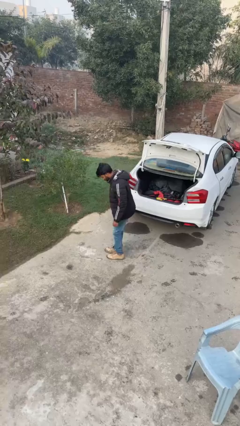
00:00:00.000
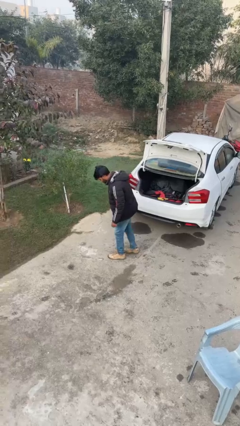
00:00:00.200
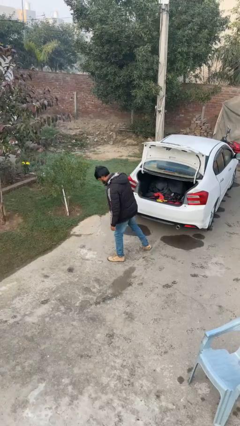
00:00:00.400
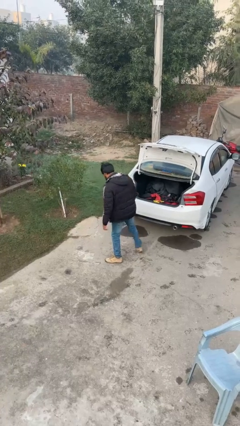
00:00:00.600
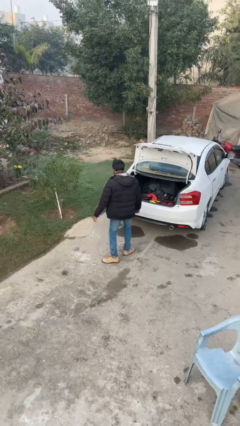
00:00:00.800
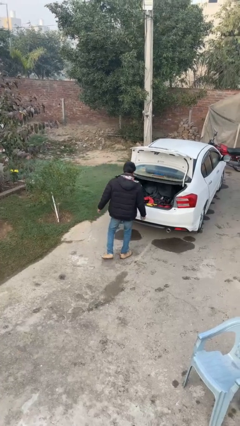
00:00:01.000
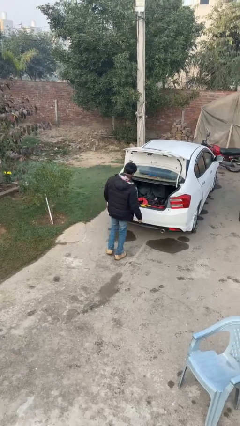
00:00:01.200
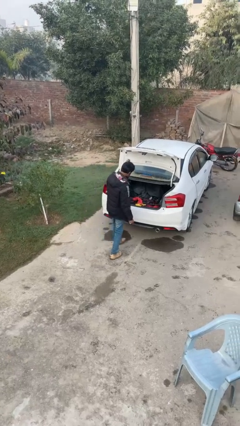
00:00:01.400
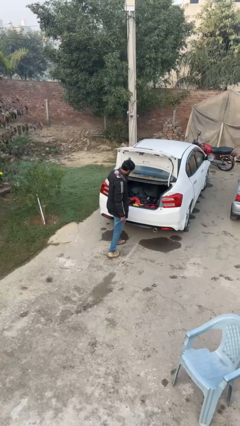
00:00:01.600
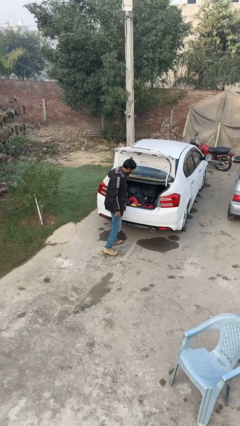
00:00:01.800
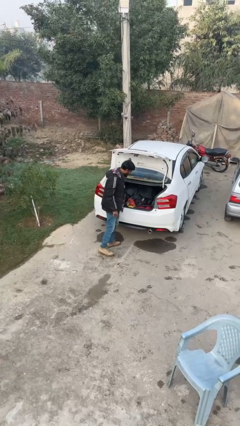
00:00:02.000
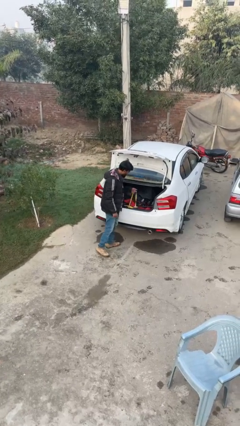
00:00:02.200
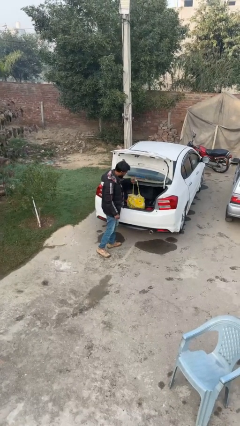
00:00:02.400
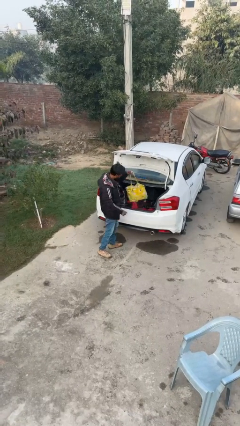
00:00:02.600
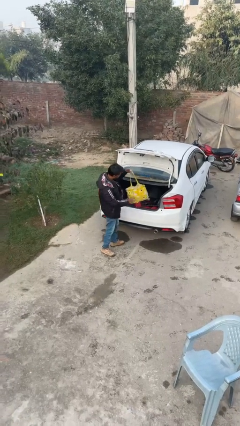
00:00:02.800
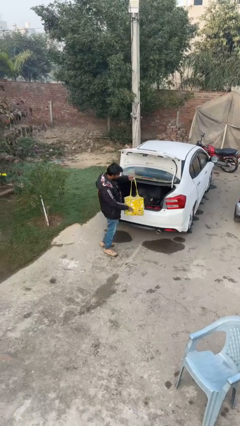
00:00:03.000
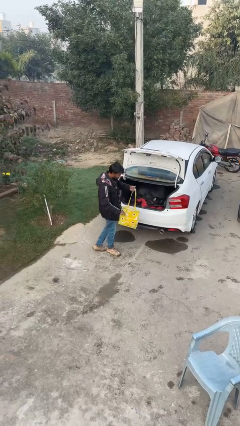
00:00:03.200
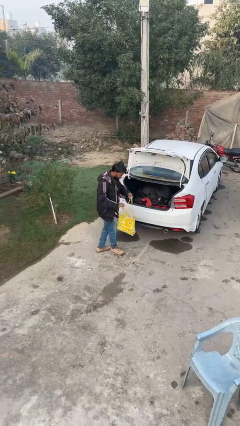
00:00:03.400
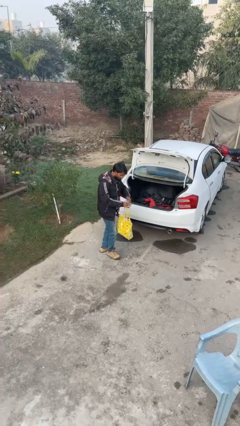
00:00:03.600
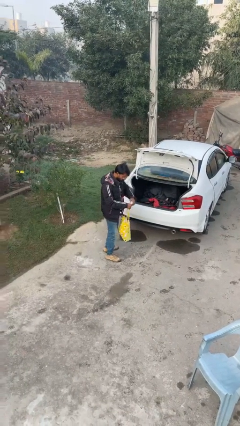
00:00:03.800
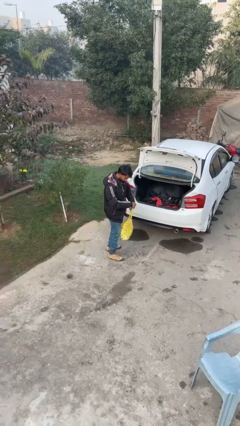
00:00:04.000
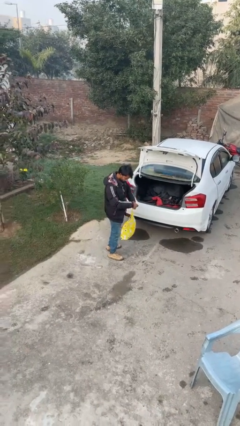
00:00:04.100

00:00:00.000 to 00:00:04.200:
person unloads car

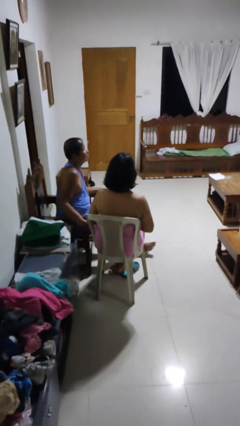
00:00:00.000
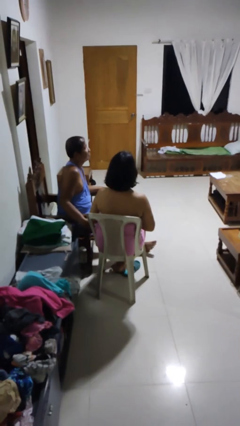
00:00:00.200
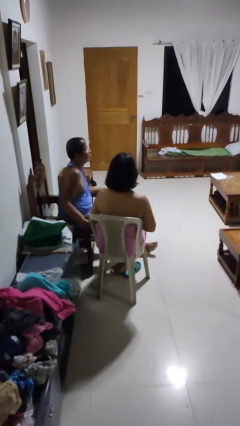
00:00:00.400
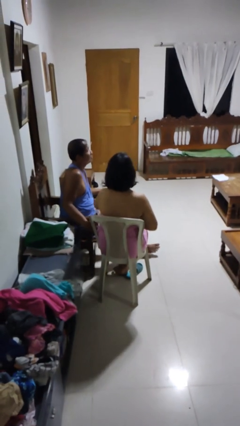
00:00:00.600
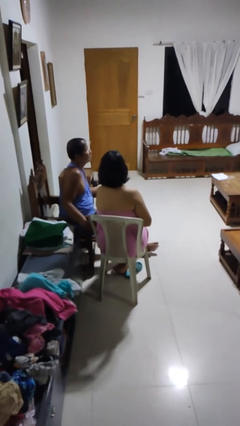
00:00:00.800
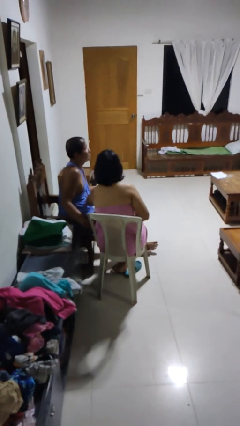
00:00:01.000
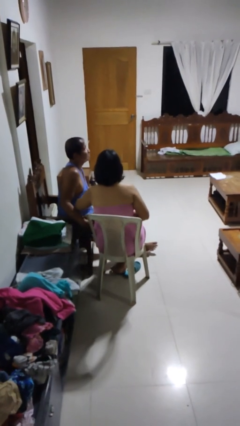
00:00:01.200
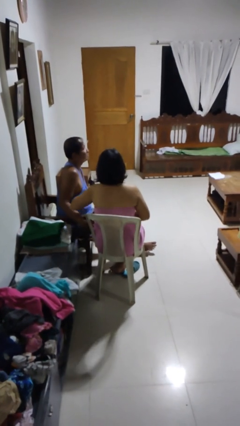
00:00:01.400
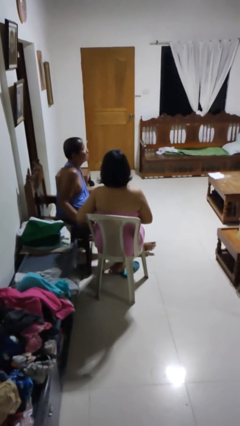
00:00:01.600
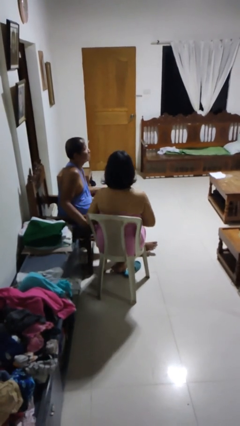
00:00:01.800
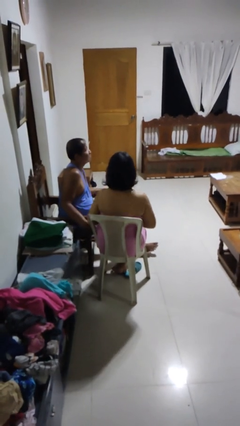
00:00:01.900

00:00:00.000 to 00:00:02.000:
person nudges person with elbow

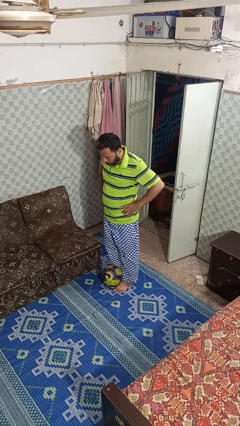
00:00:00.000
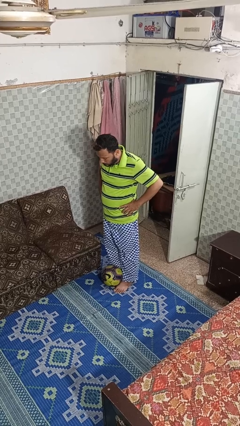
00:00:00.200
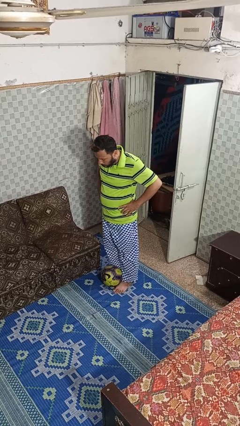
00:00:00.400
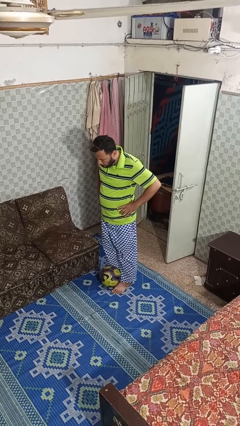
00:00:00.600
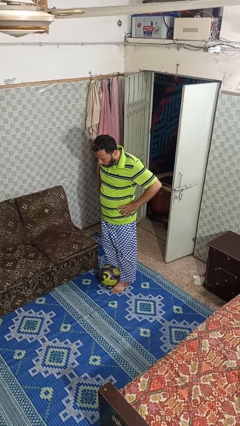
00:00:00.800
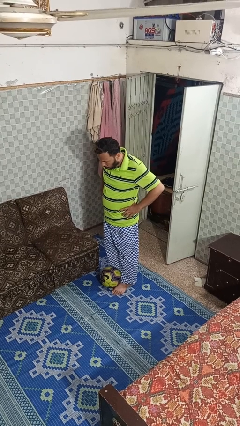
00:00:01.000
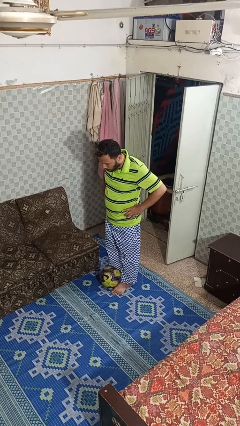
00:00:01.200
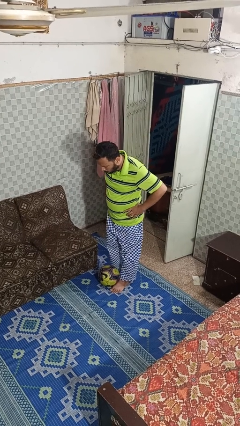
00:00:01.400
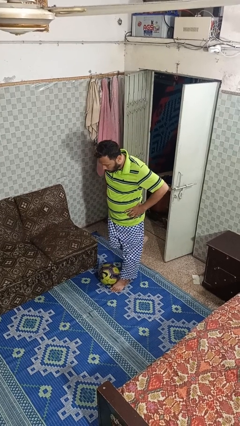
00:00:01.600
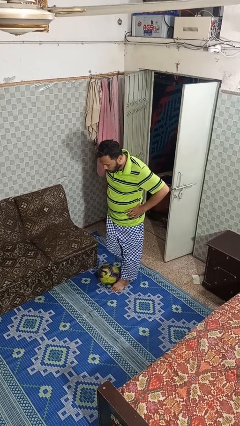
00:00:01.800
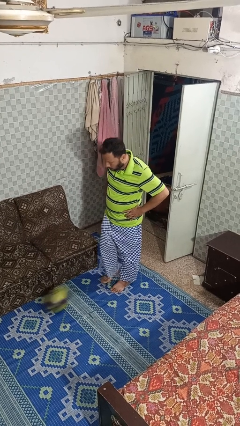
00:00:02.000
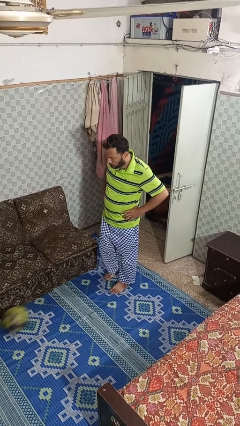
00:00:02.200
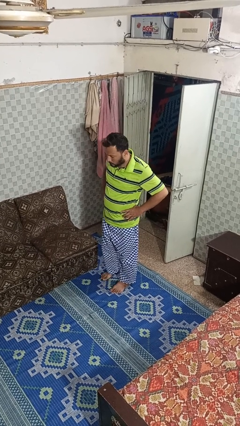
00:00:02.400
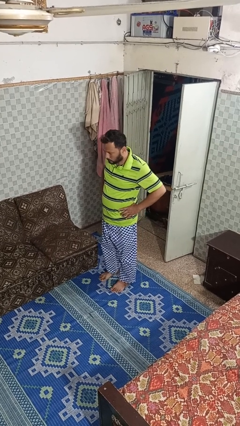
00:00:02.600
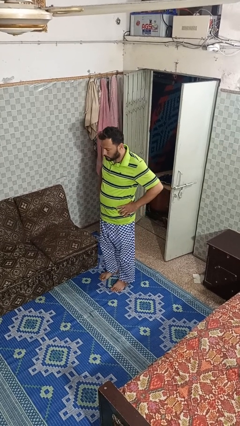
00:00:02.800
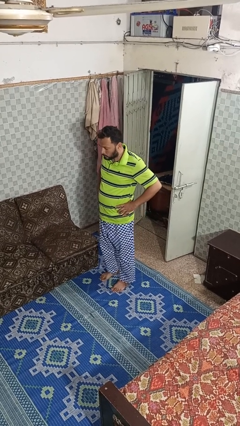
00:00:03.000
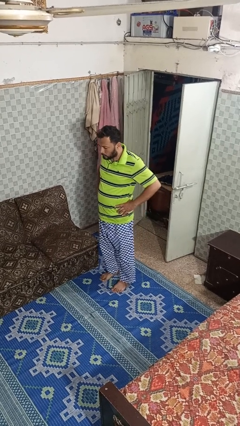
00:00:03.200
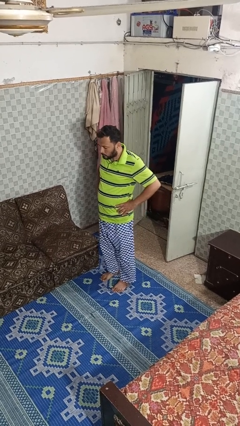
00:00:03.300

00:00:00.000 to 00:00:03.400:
person kicks object to person

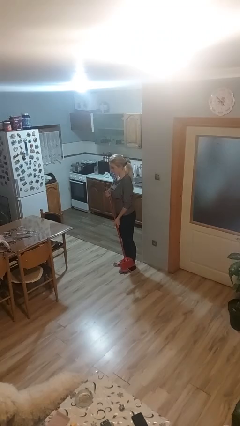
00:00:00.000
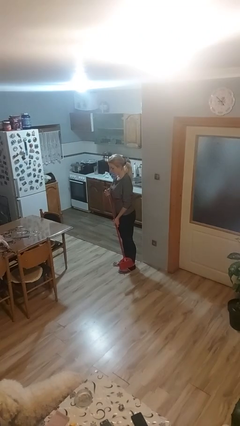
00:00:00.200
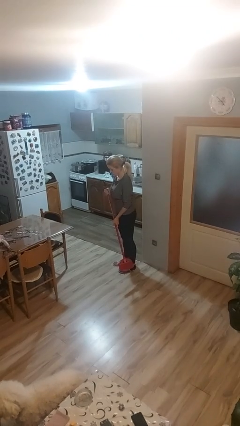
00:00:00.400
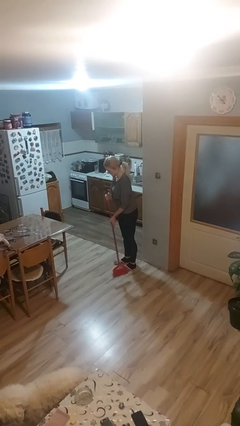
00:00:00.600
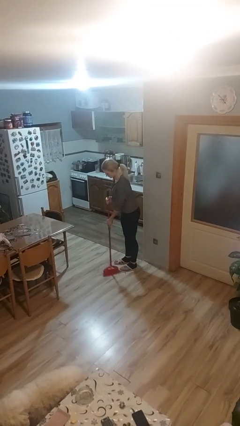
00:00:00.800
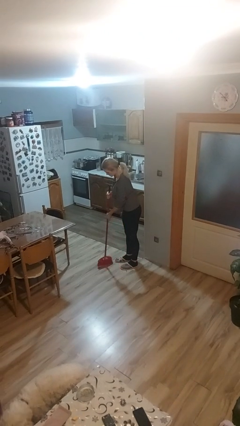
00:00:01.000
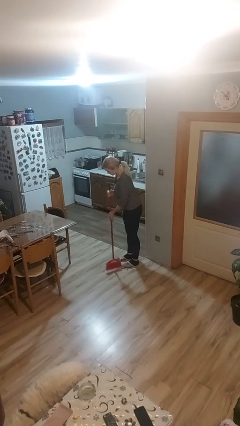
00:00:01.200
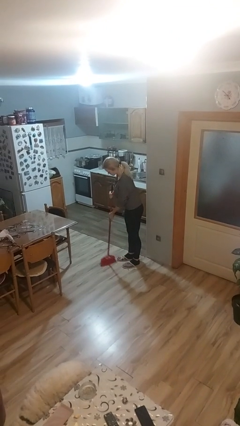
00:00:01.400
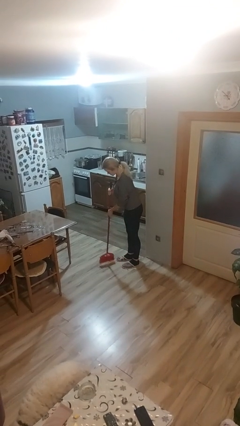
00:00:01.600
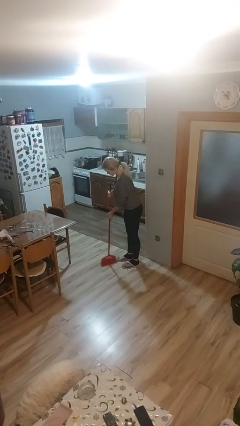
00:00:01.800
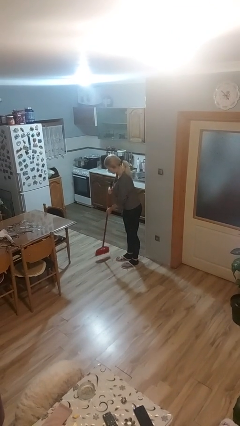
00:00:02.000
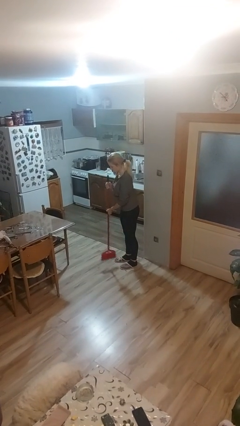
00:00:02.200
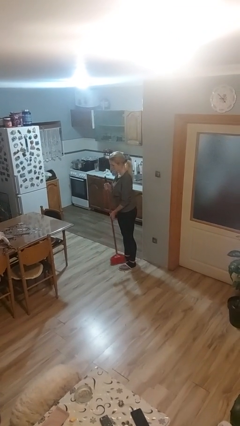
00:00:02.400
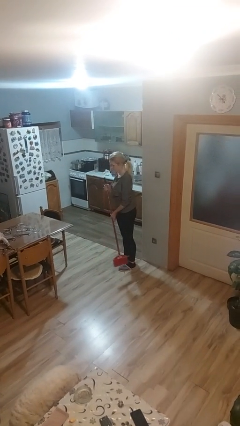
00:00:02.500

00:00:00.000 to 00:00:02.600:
person sweeps floor

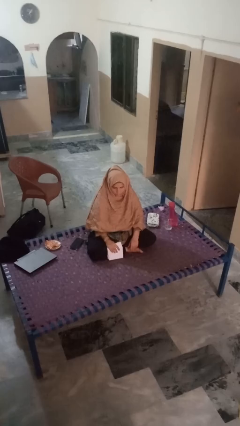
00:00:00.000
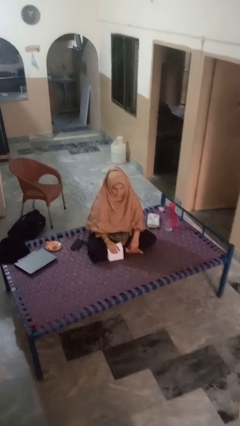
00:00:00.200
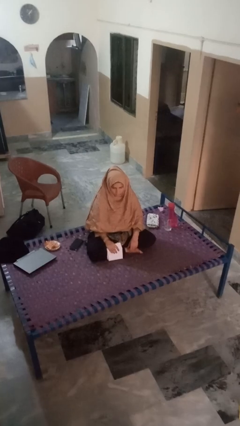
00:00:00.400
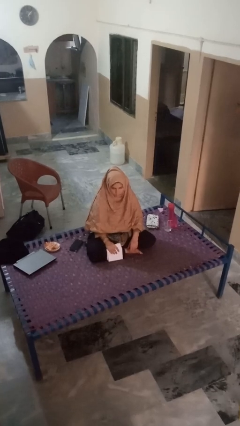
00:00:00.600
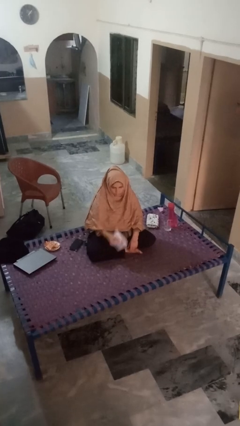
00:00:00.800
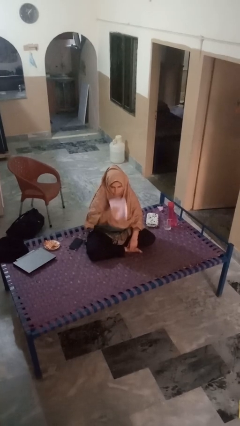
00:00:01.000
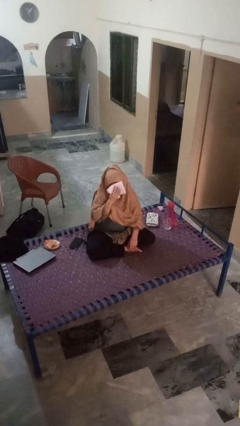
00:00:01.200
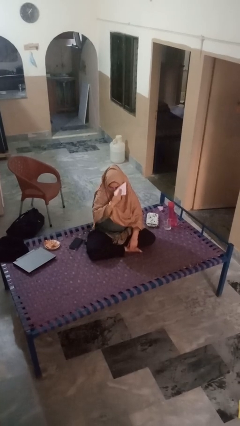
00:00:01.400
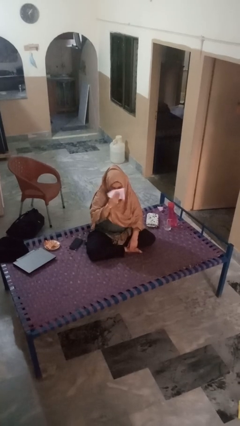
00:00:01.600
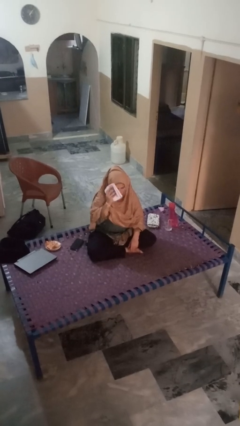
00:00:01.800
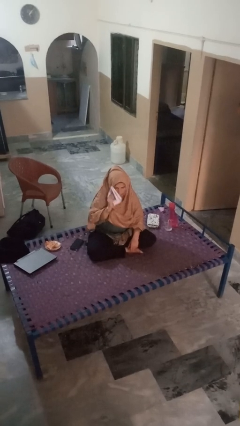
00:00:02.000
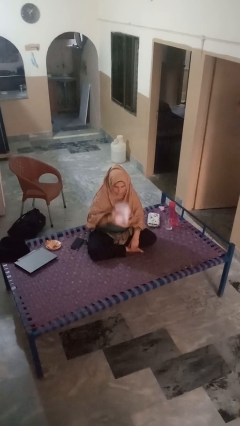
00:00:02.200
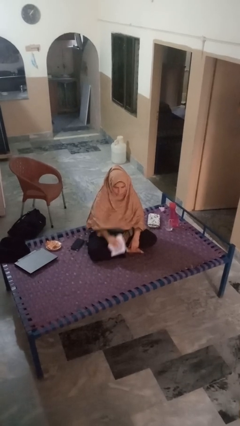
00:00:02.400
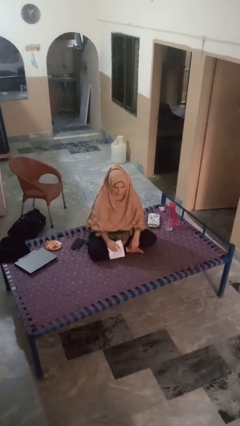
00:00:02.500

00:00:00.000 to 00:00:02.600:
person wipes mouth with napkin

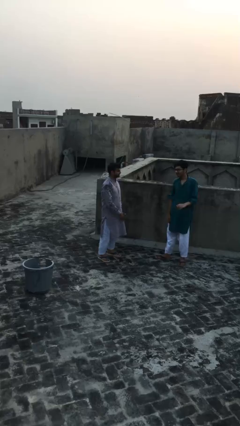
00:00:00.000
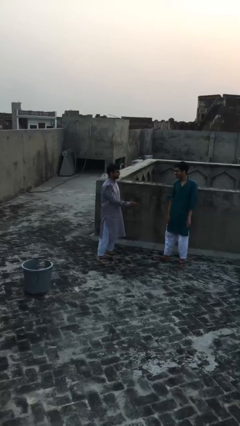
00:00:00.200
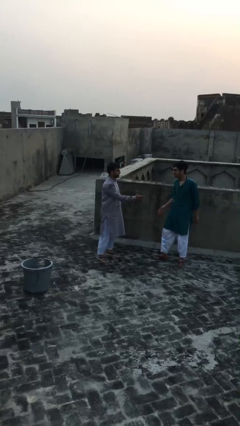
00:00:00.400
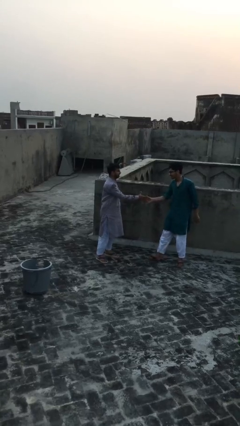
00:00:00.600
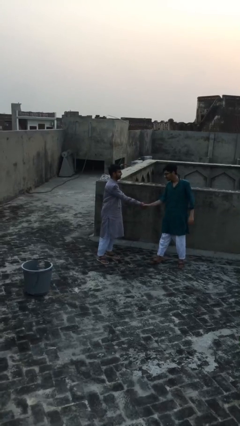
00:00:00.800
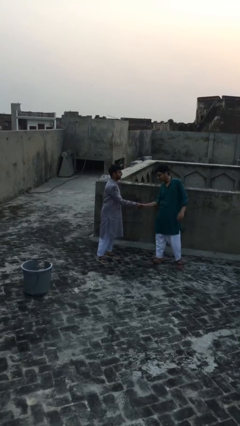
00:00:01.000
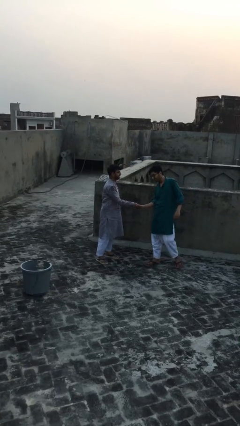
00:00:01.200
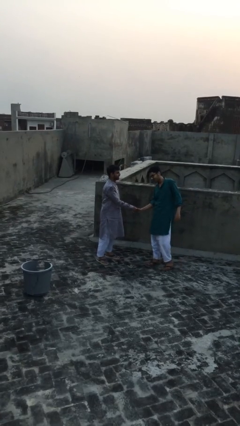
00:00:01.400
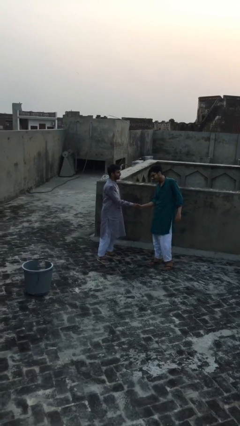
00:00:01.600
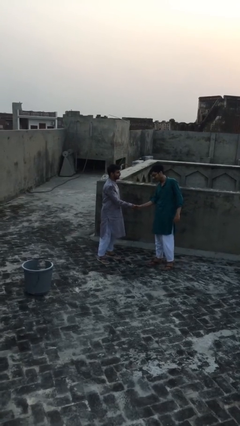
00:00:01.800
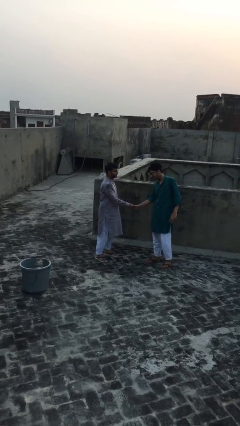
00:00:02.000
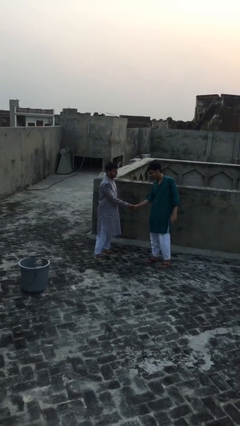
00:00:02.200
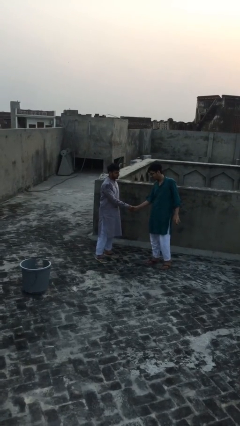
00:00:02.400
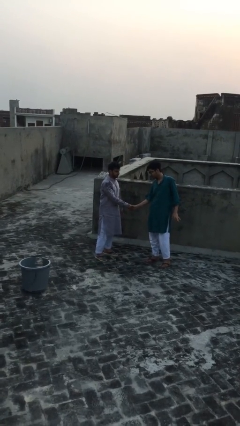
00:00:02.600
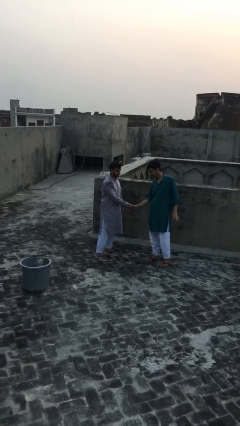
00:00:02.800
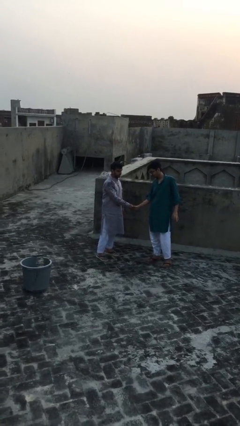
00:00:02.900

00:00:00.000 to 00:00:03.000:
person shakes hand
